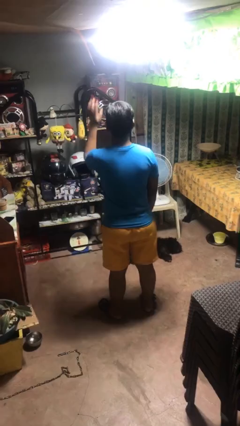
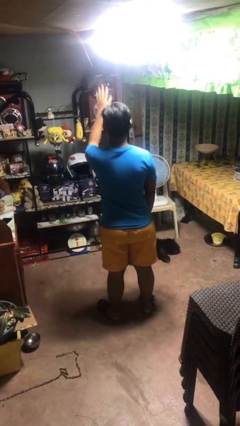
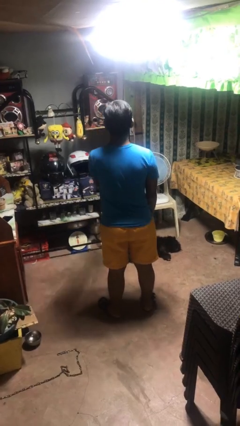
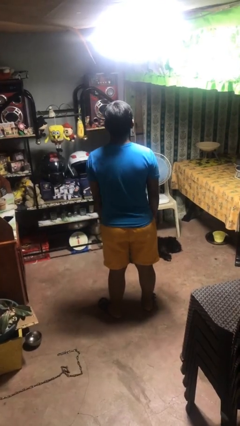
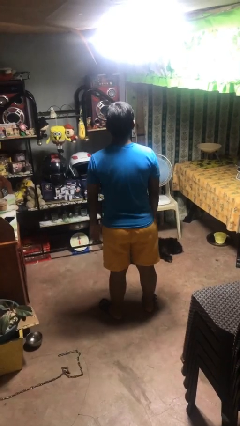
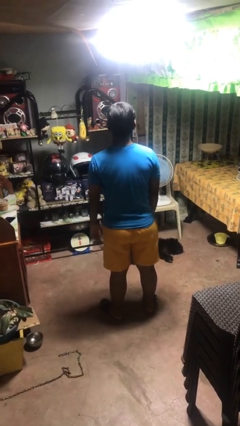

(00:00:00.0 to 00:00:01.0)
person gestures swipe down

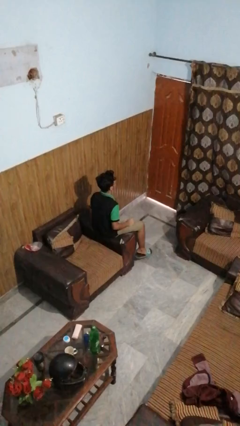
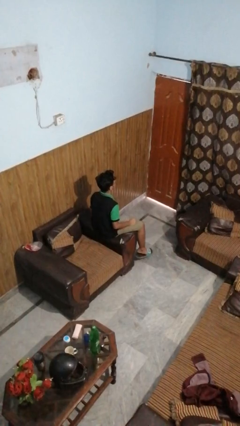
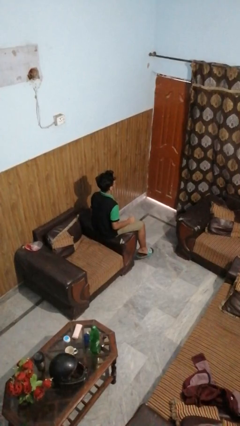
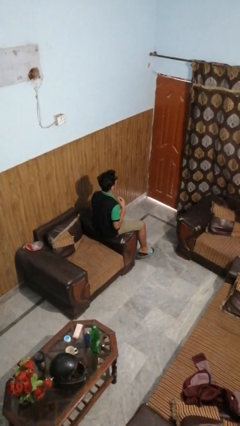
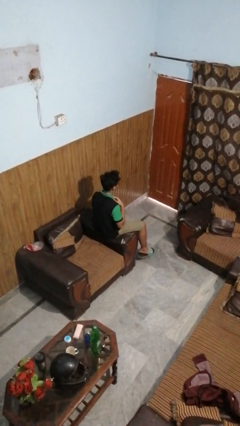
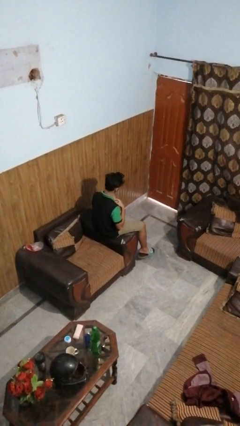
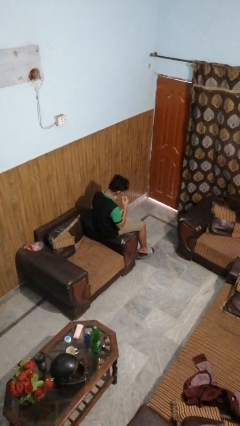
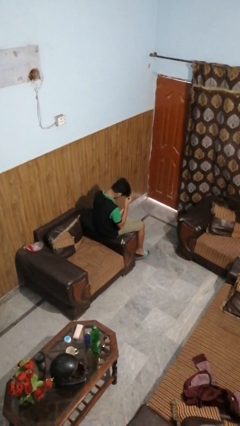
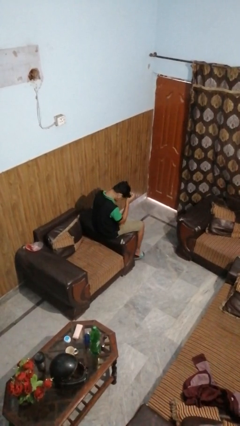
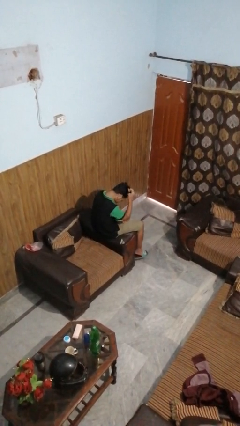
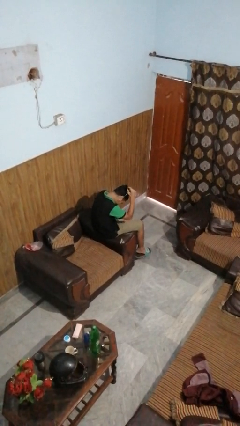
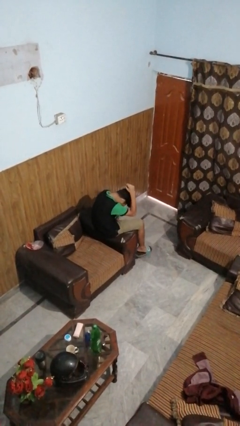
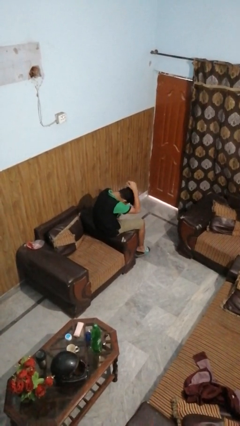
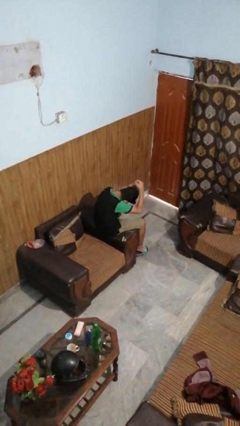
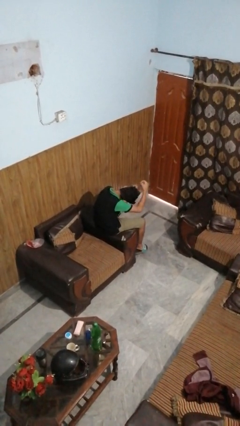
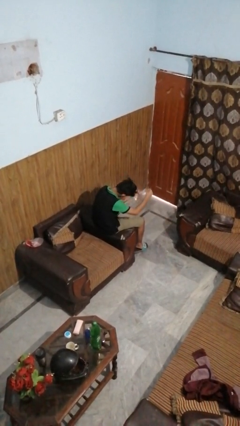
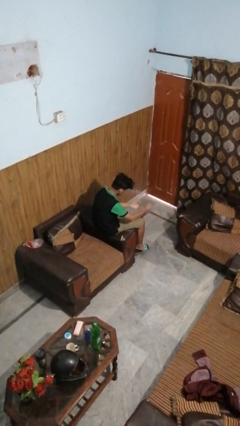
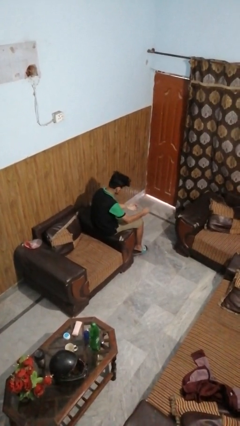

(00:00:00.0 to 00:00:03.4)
person takes off necklace

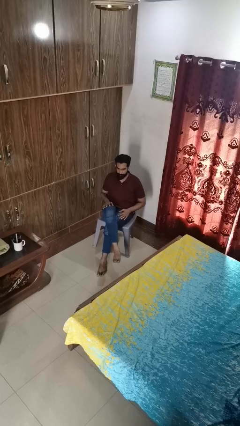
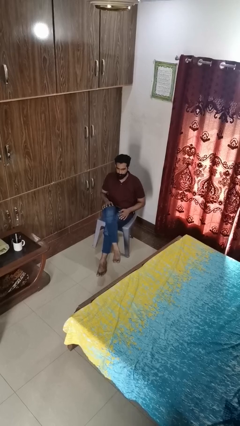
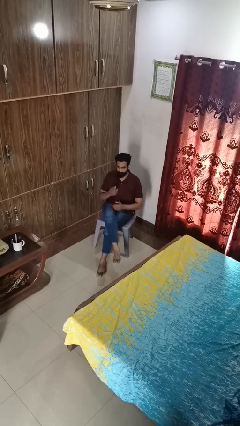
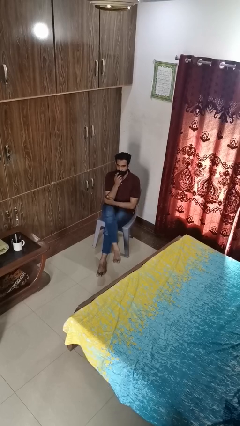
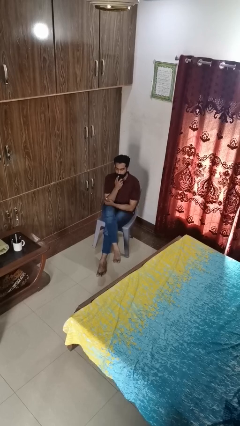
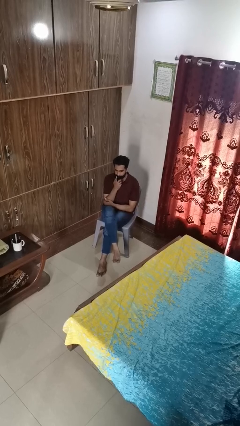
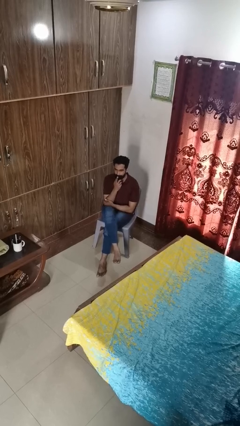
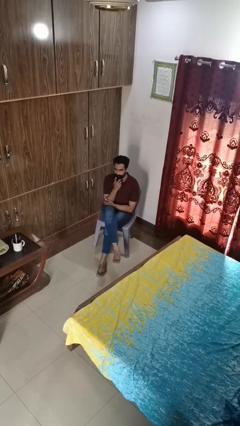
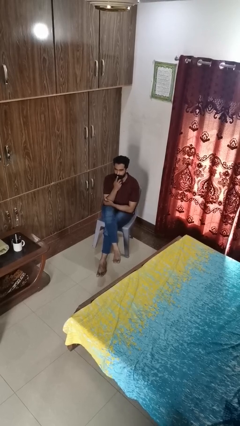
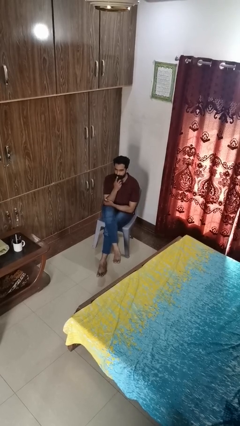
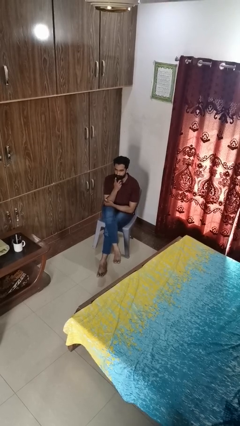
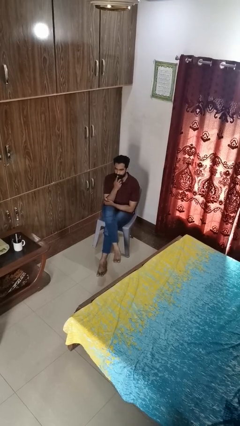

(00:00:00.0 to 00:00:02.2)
person strokes chin

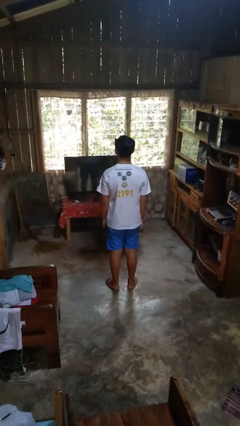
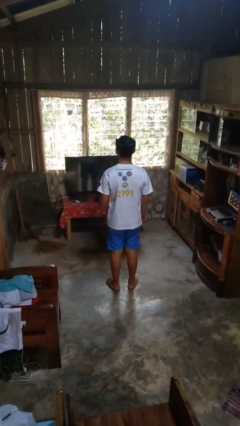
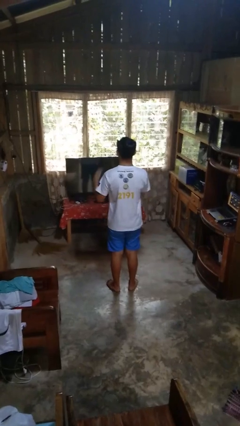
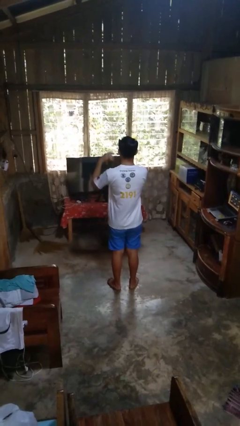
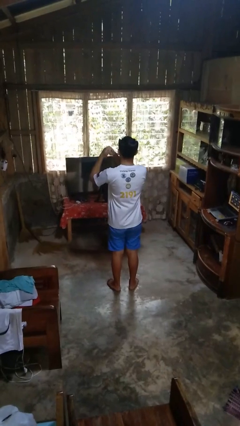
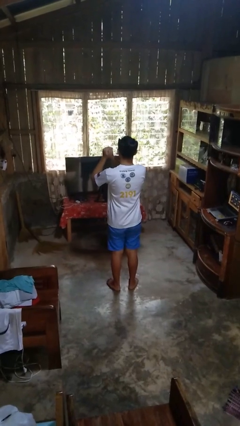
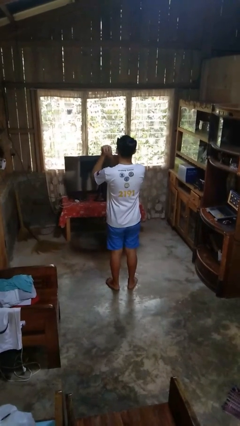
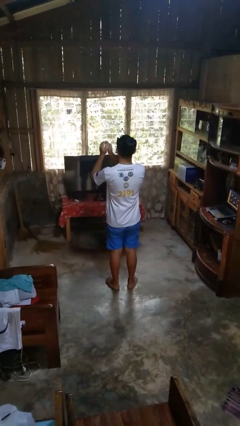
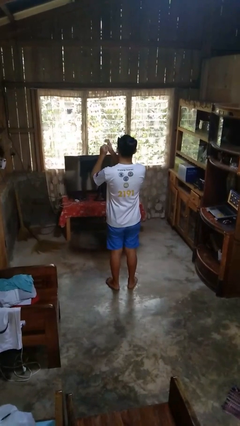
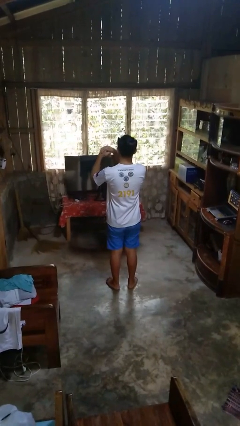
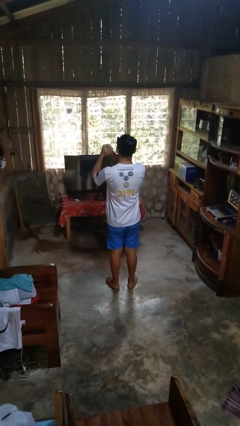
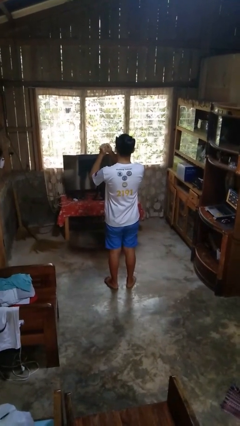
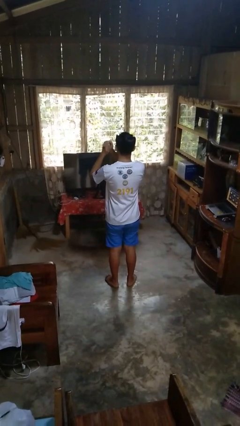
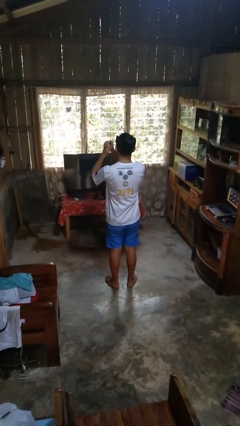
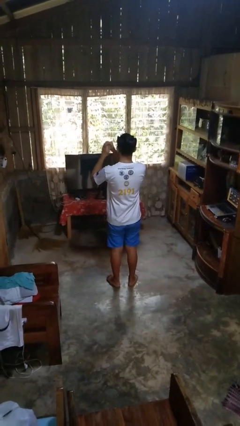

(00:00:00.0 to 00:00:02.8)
person cracks knuckles

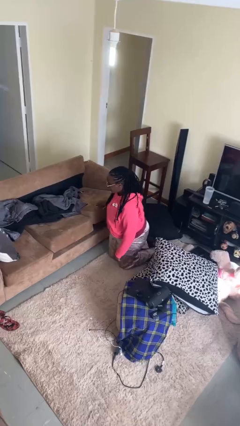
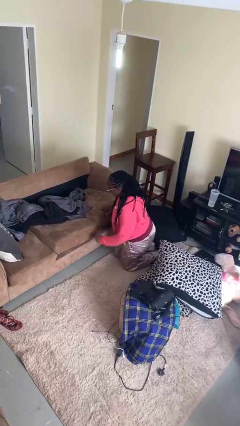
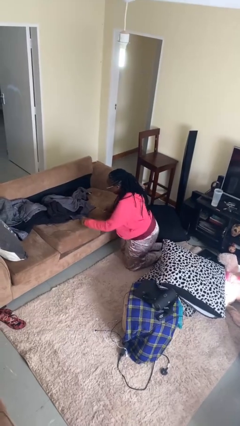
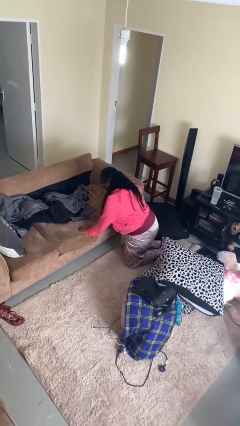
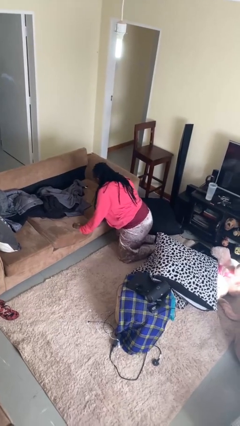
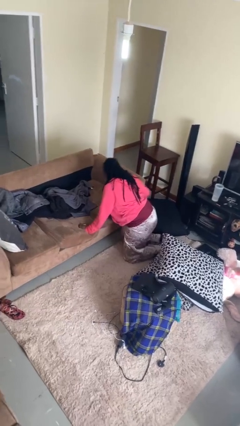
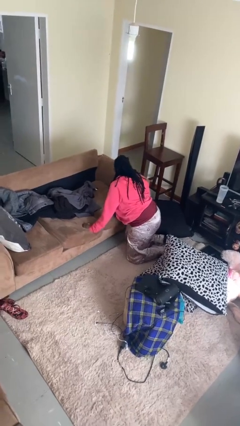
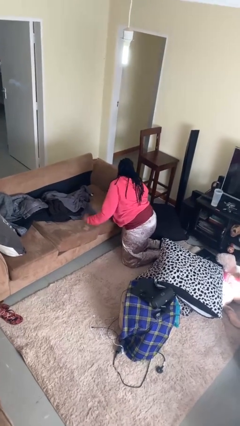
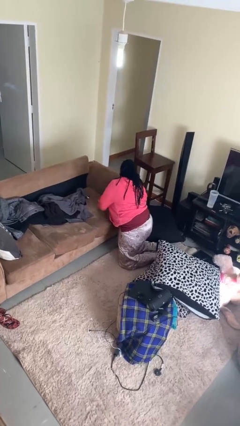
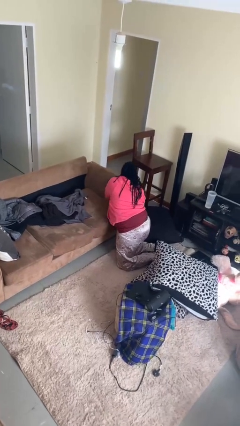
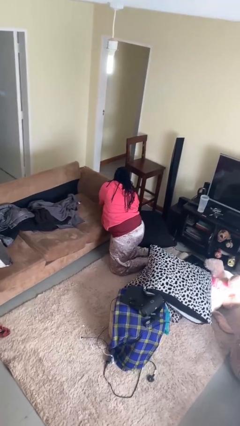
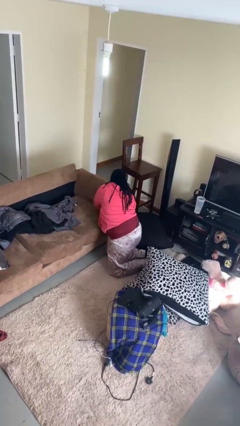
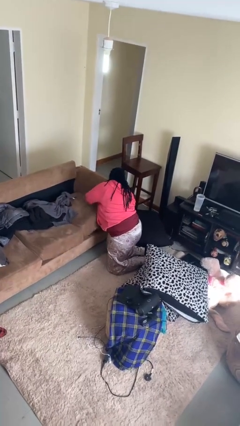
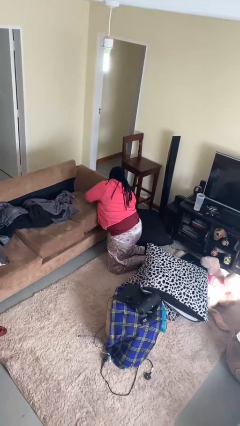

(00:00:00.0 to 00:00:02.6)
person searches under couch

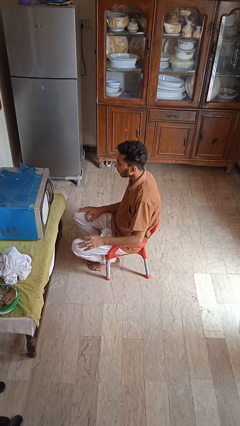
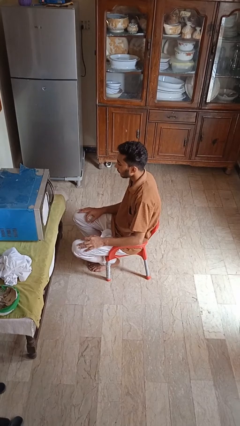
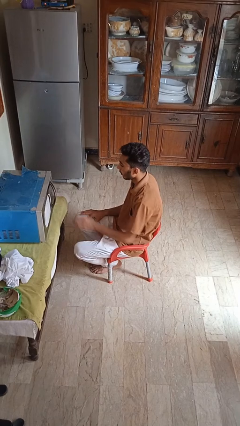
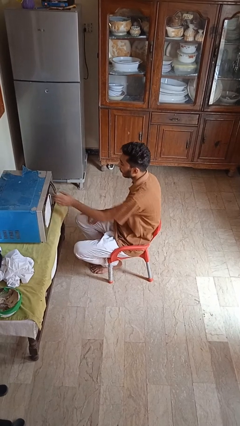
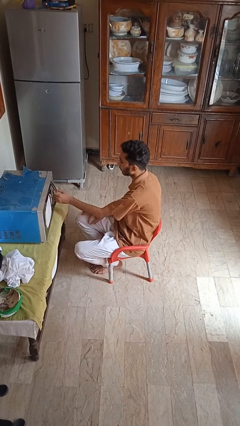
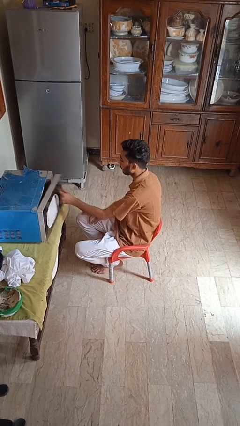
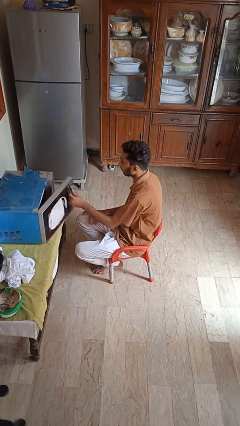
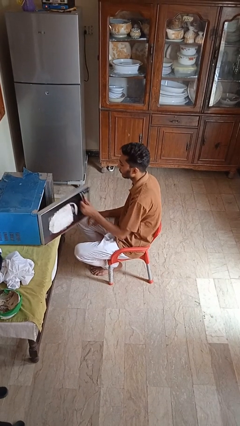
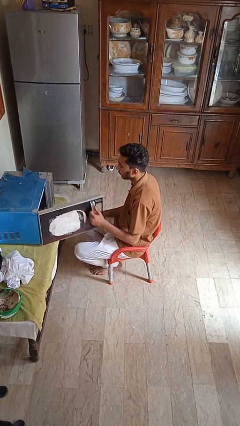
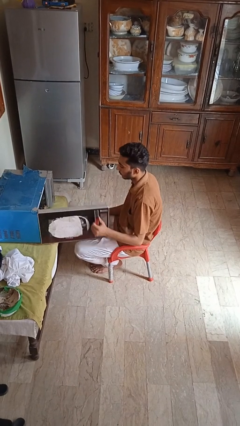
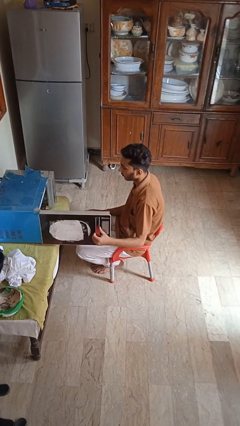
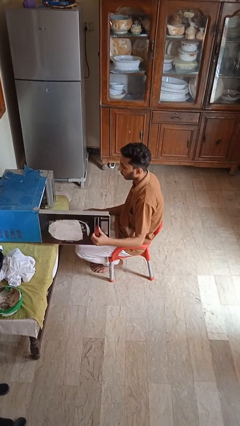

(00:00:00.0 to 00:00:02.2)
person opens microwave

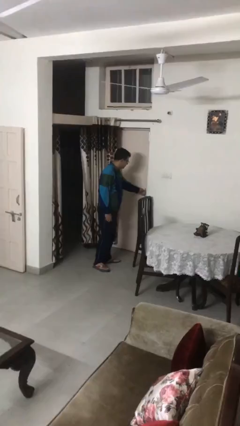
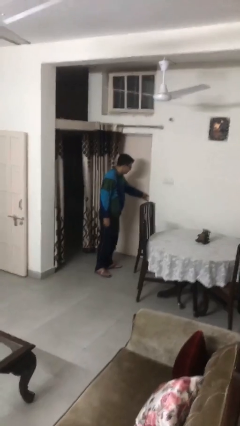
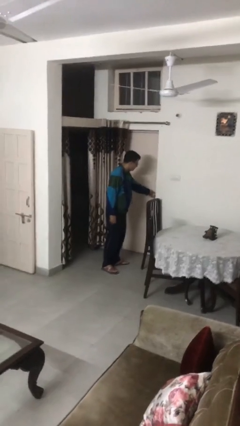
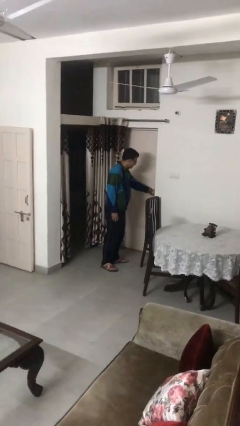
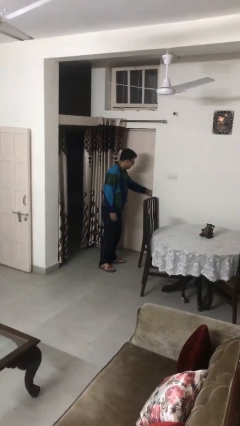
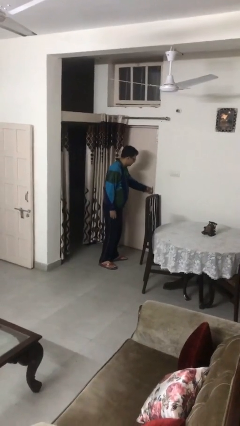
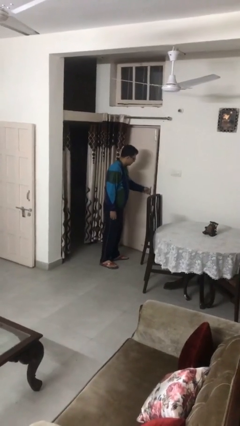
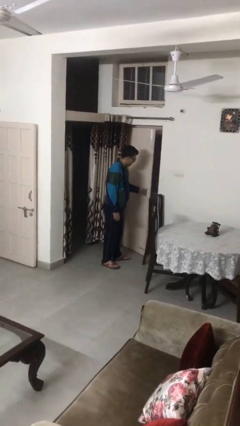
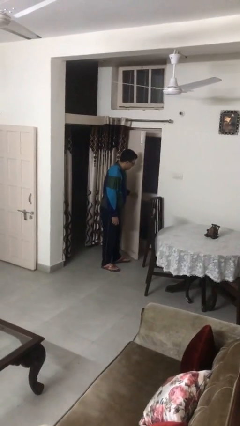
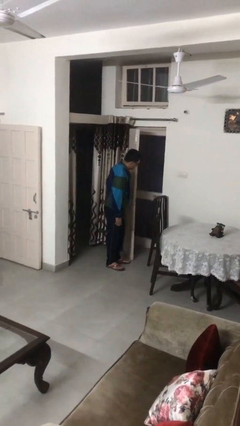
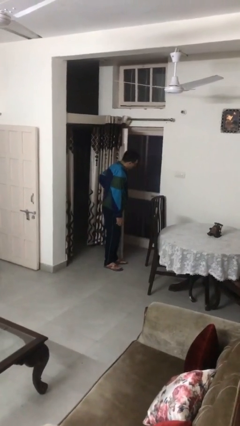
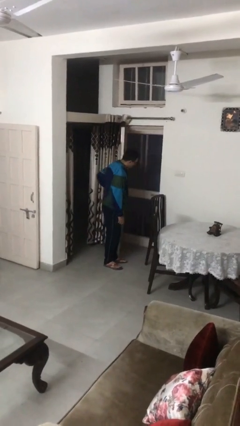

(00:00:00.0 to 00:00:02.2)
person opens facility door

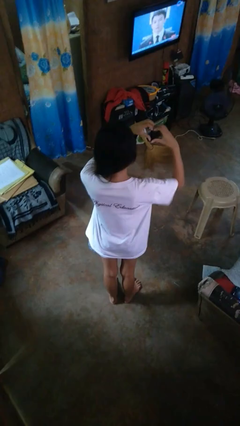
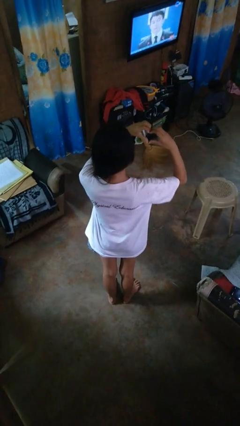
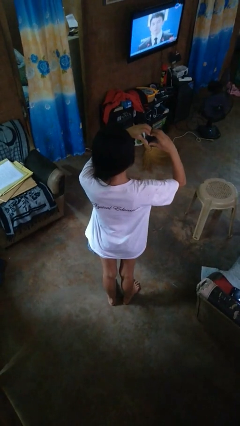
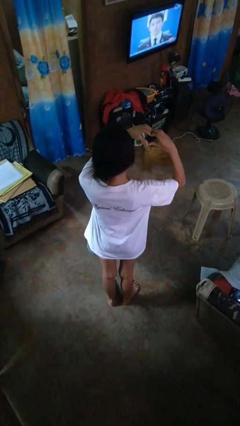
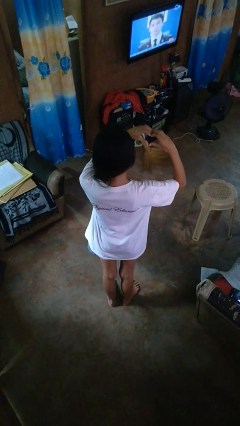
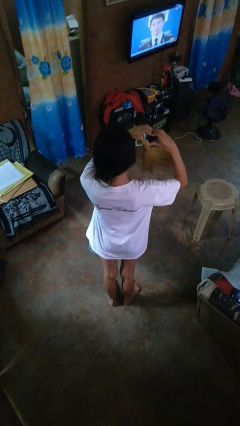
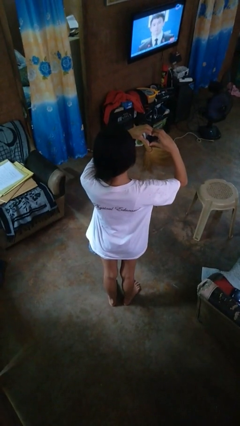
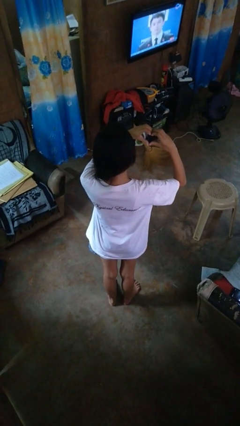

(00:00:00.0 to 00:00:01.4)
person gestures heart
